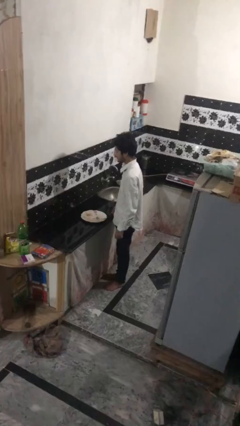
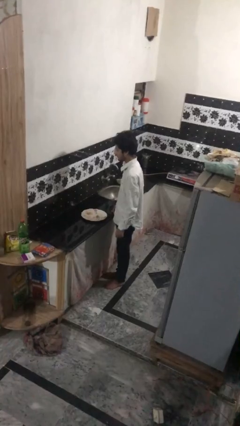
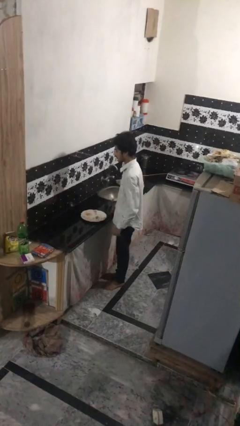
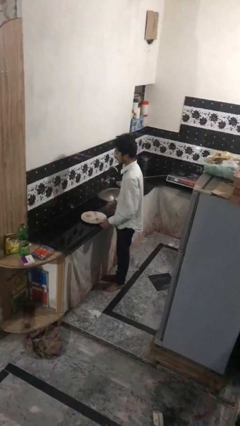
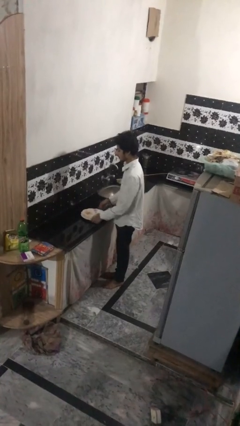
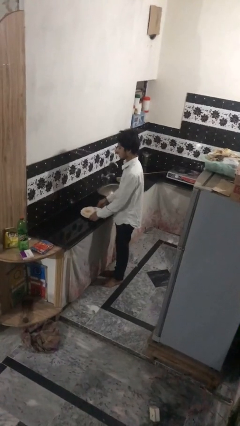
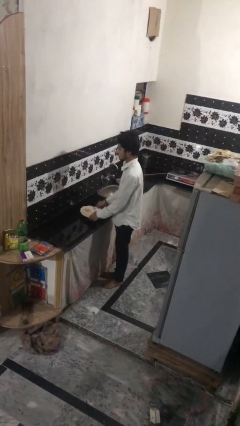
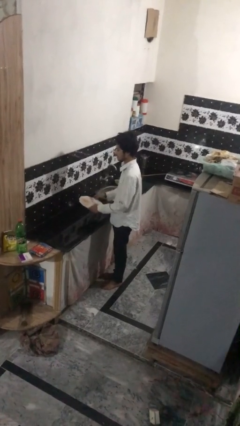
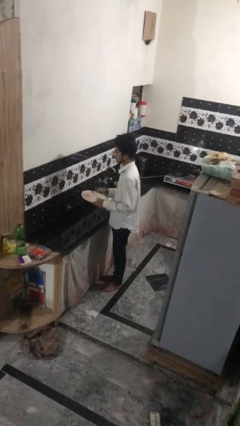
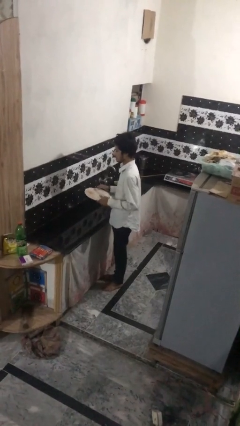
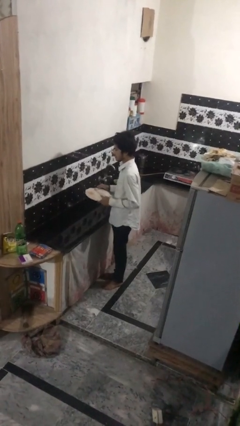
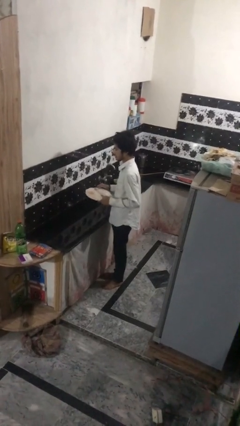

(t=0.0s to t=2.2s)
person picks up object from countertop

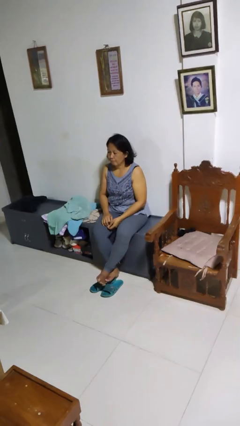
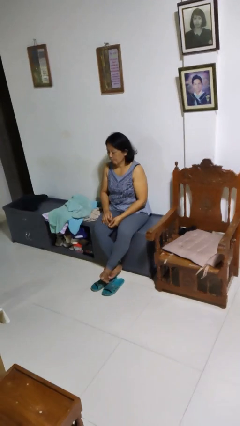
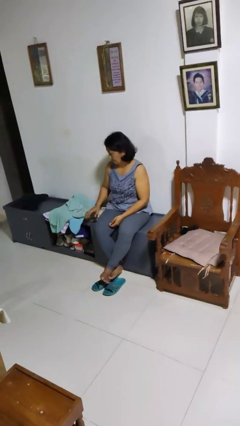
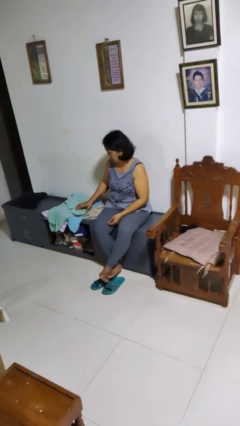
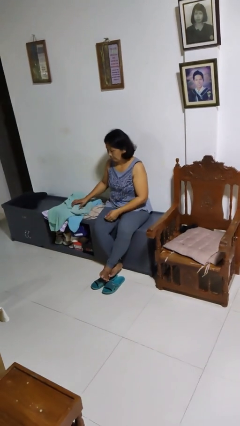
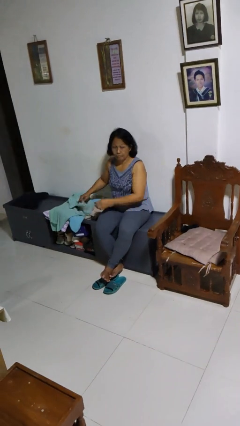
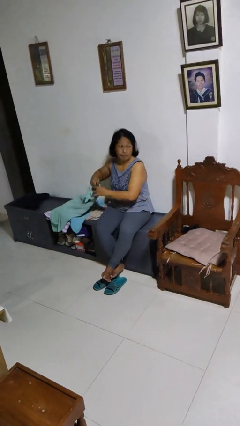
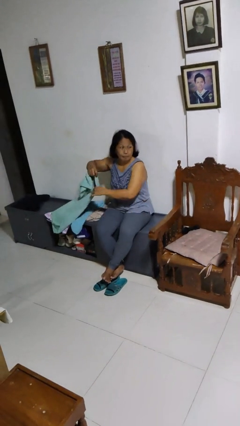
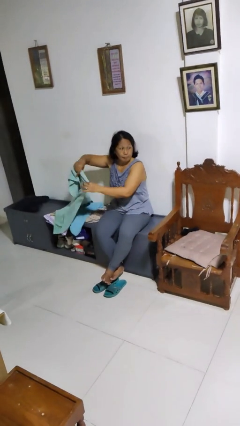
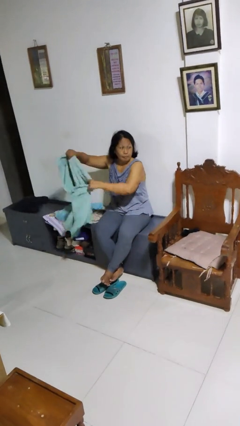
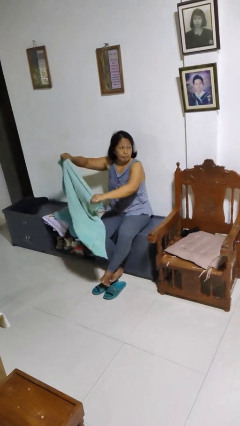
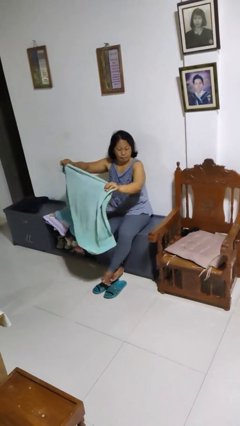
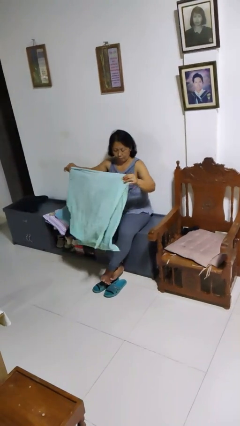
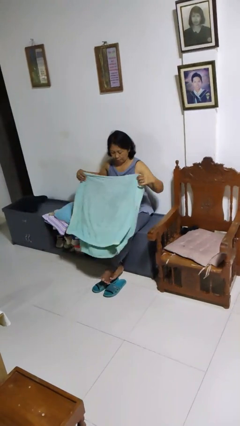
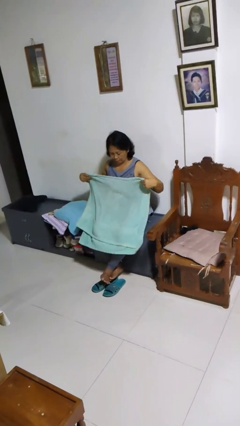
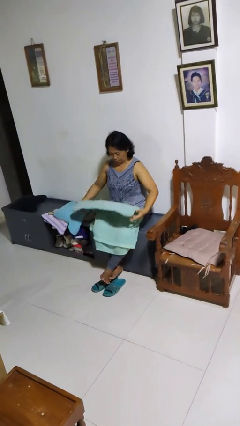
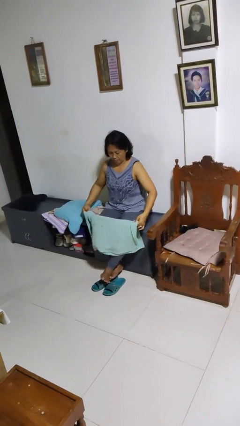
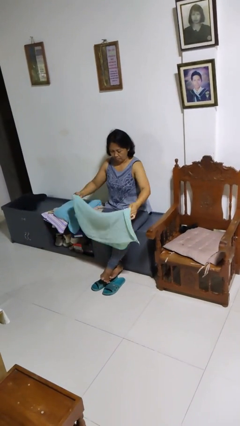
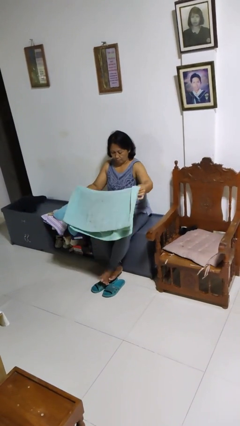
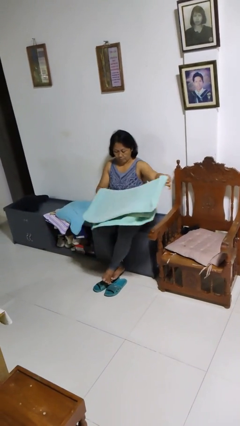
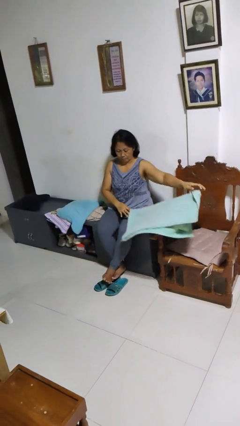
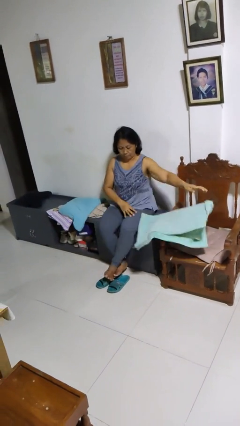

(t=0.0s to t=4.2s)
person folds towel

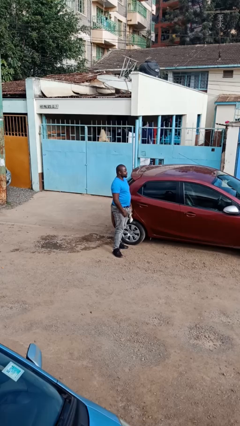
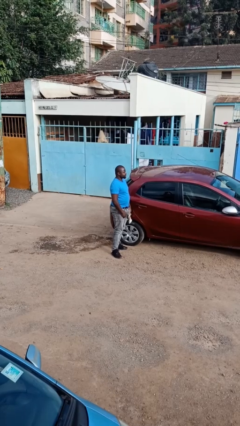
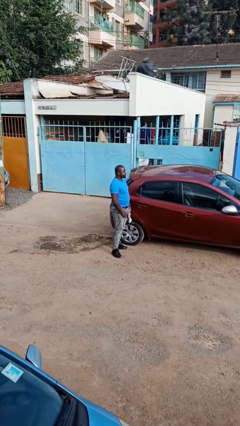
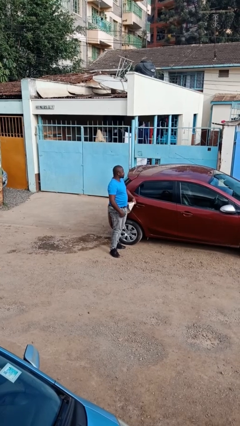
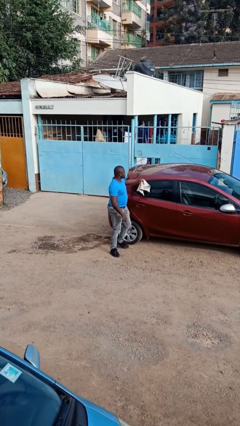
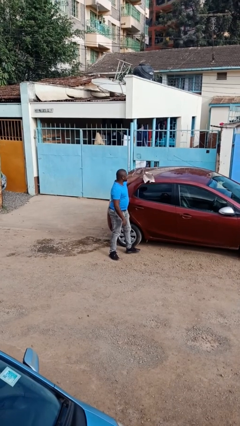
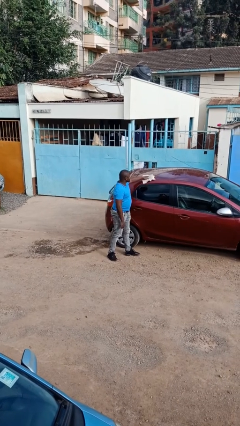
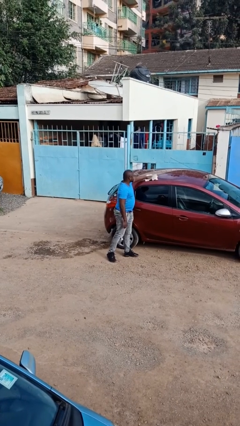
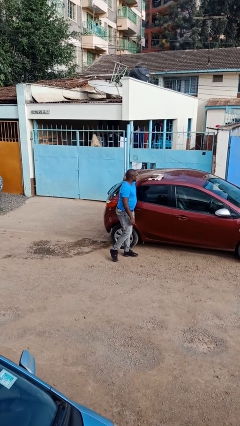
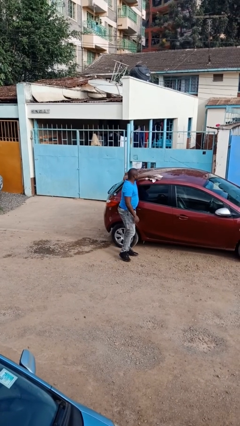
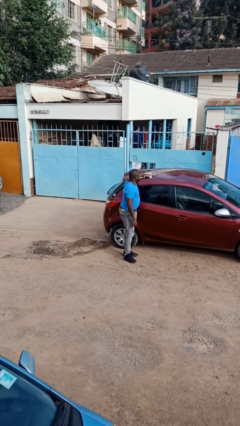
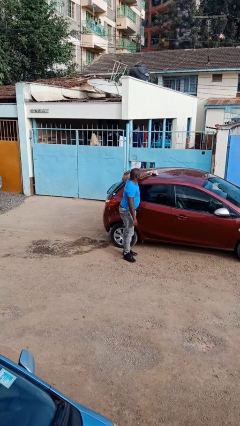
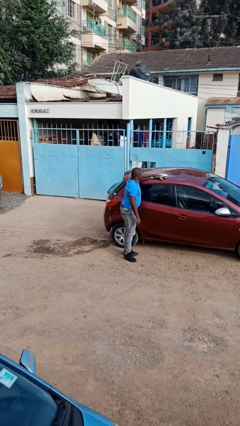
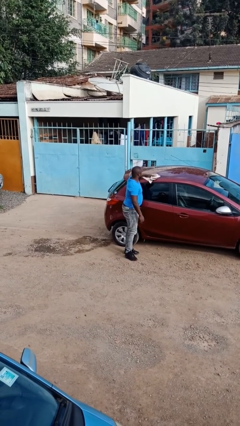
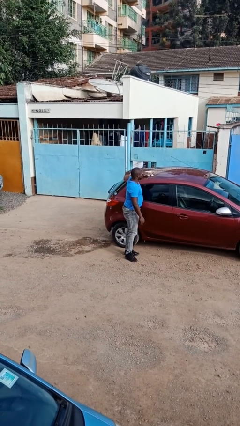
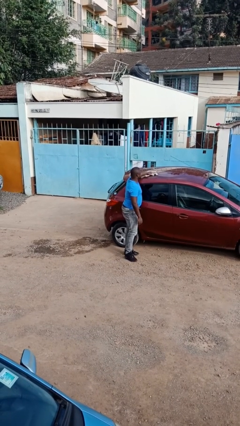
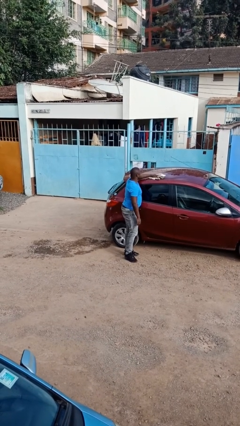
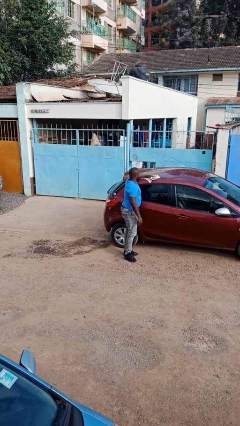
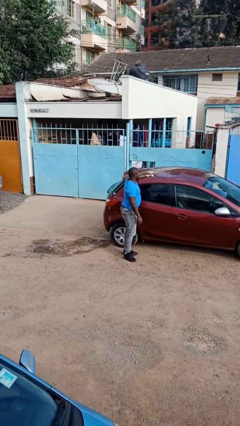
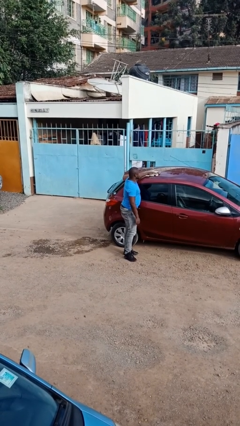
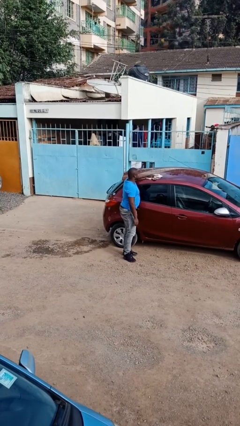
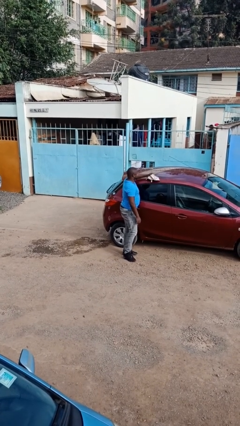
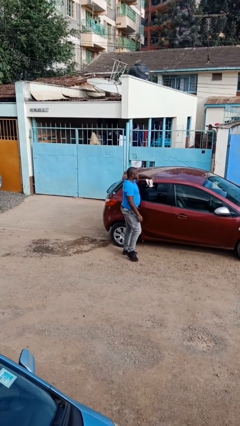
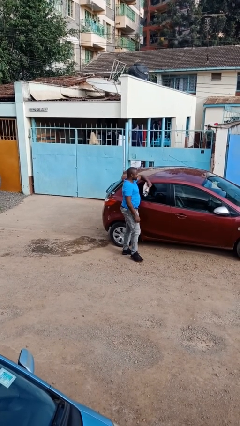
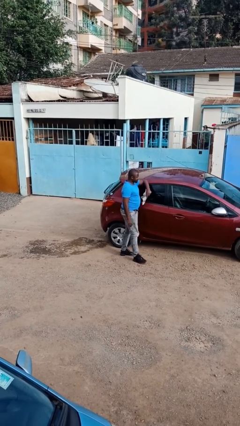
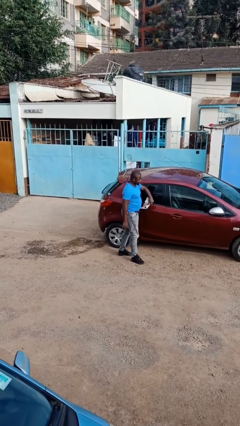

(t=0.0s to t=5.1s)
person polishes car with rag

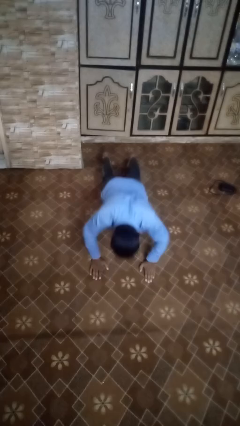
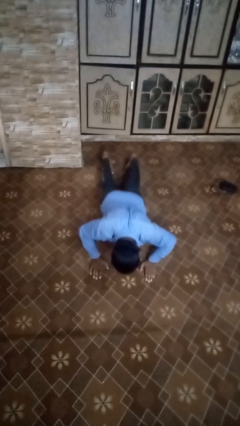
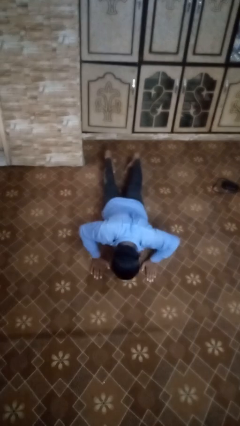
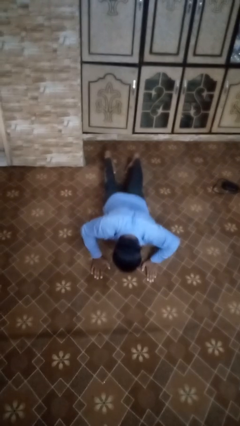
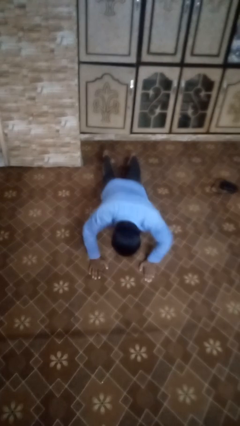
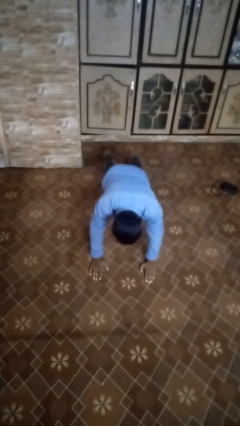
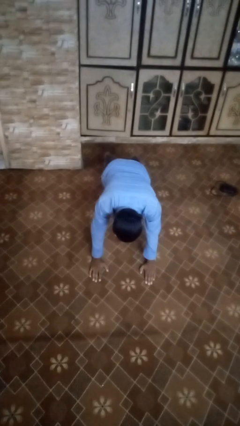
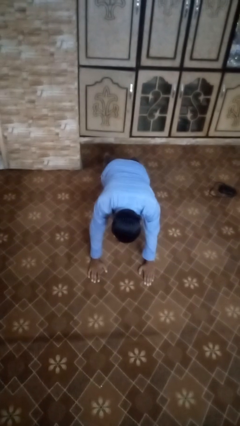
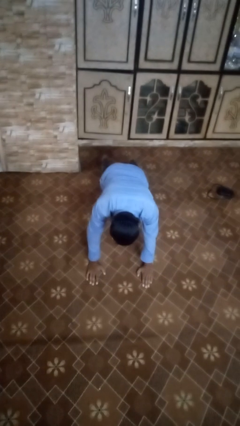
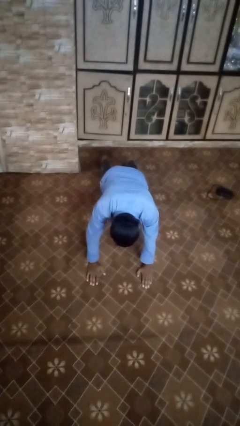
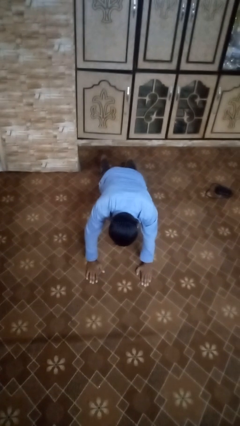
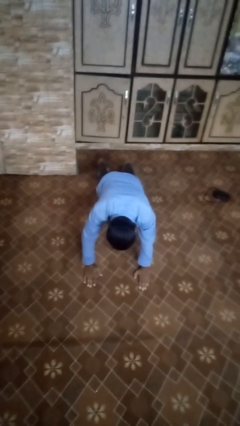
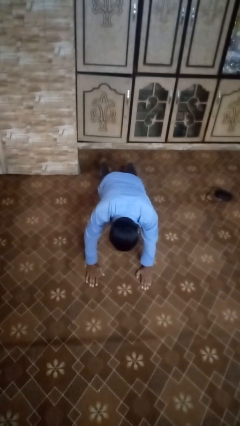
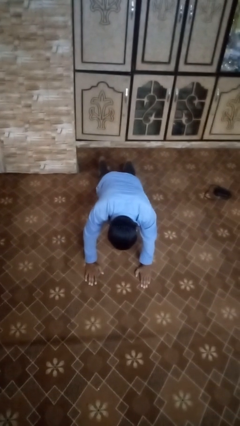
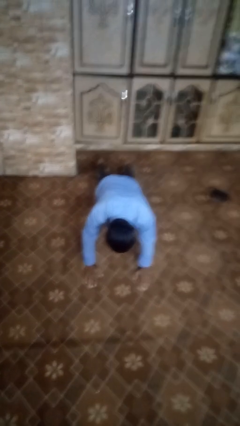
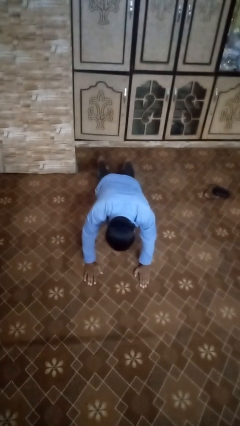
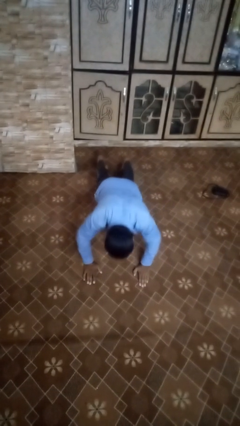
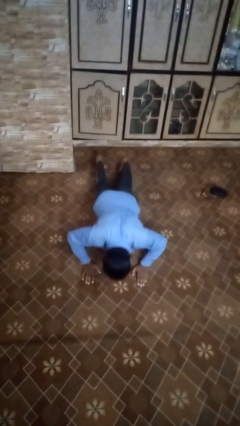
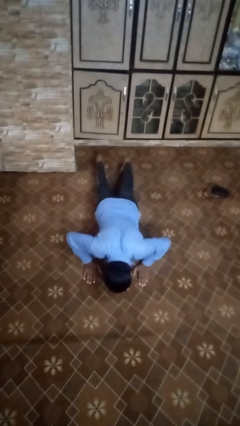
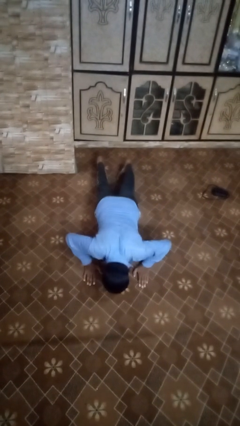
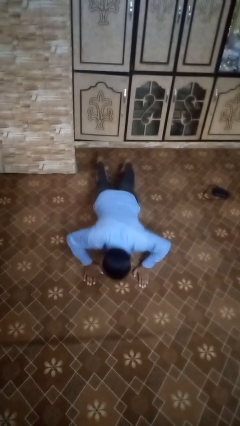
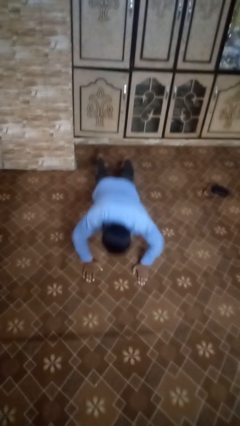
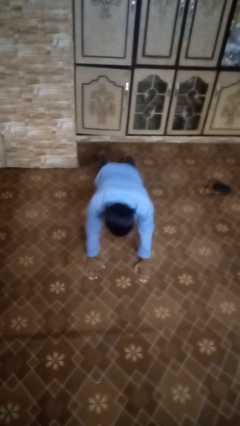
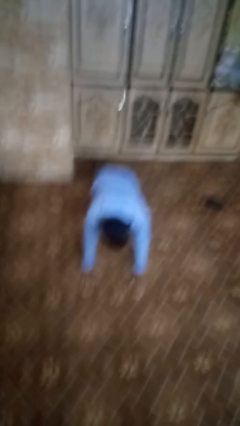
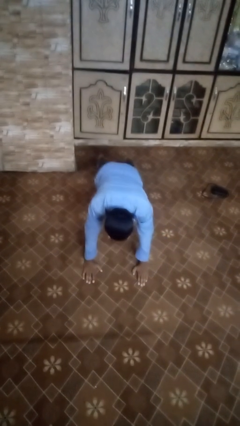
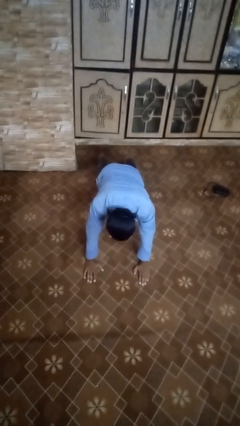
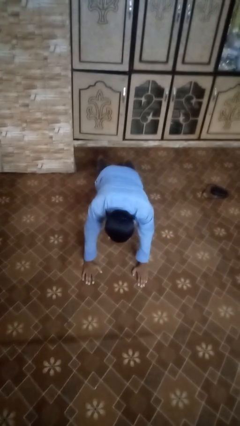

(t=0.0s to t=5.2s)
person exercises with pushup

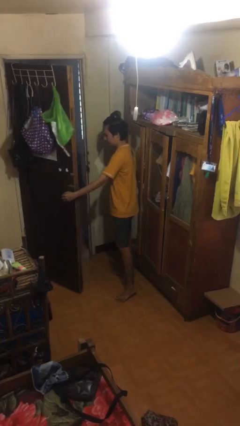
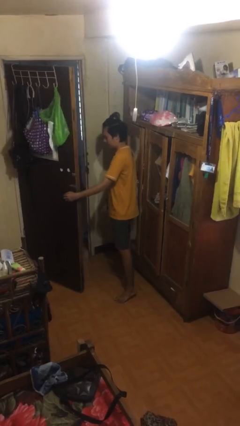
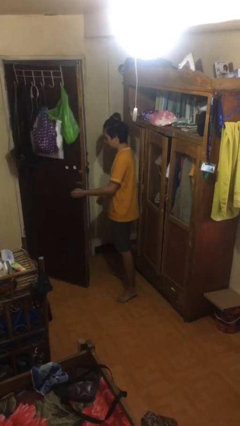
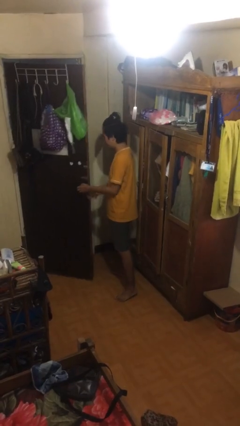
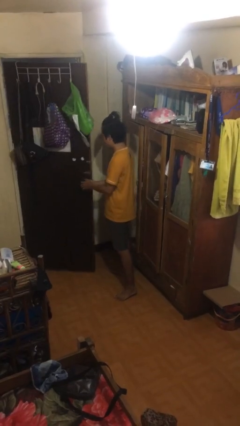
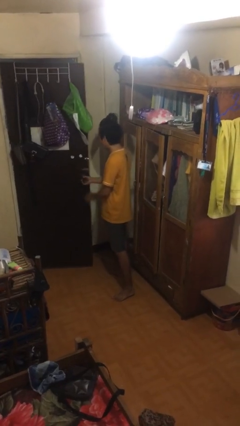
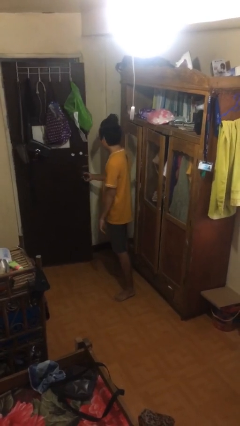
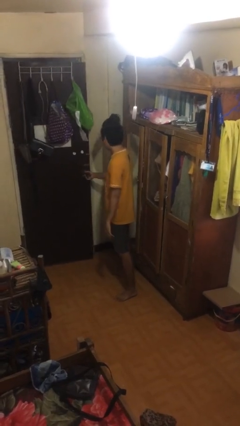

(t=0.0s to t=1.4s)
person closes facility door
